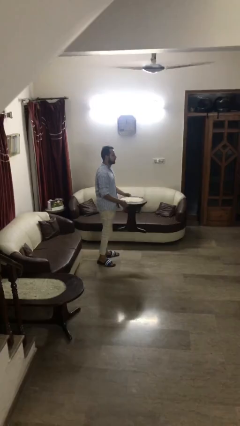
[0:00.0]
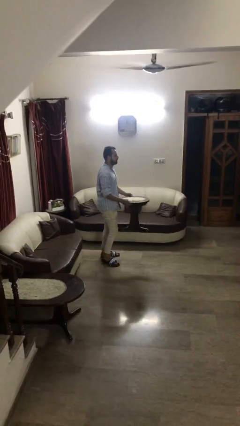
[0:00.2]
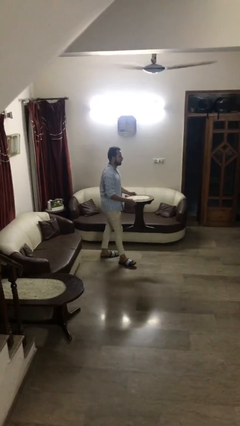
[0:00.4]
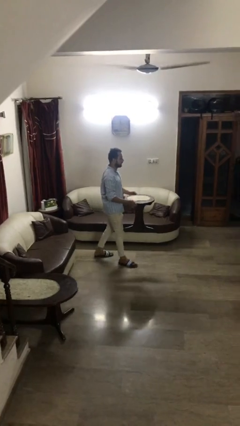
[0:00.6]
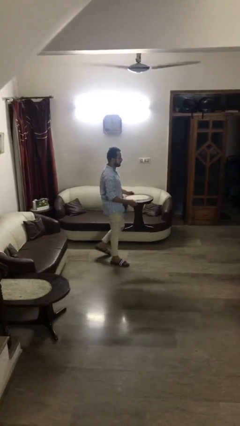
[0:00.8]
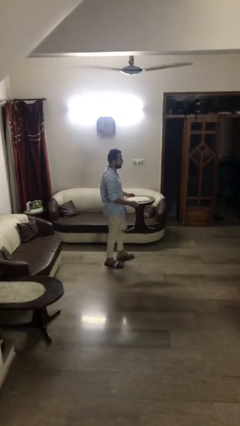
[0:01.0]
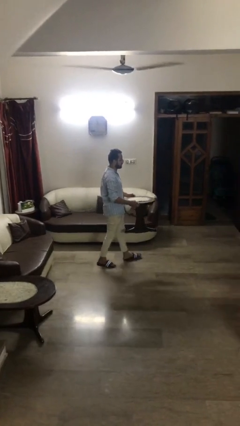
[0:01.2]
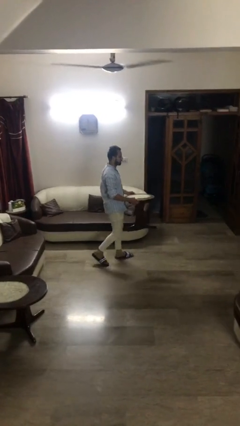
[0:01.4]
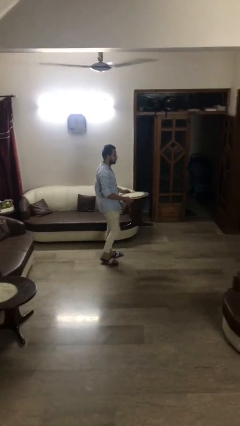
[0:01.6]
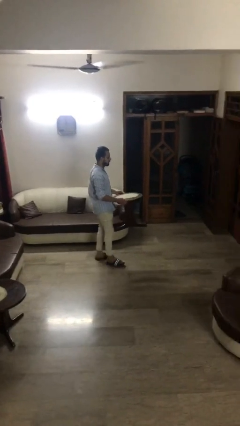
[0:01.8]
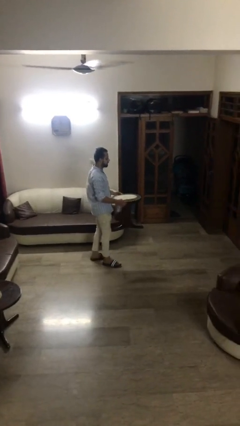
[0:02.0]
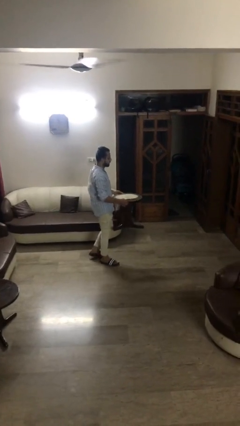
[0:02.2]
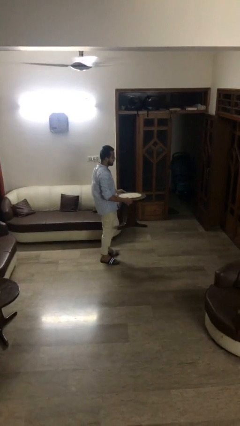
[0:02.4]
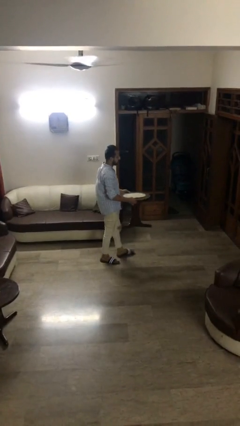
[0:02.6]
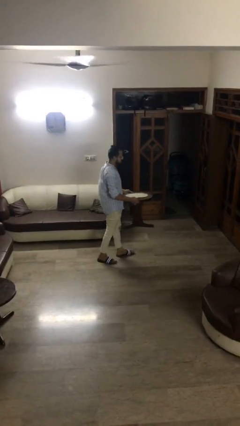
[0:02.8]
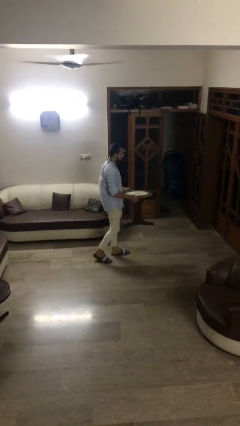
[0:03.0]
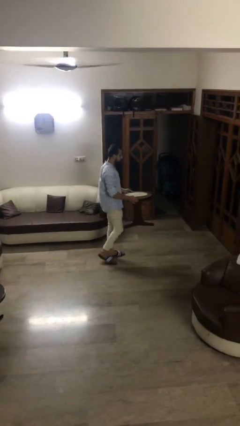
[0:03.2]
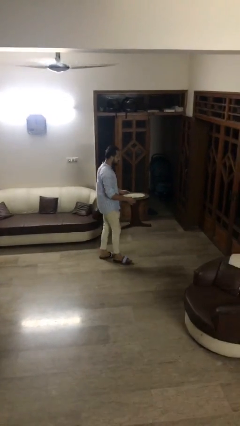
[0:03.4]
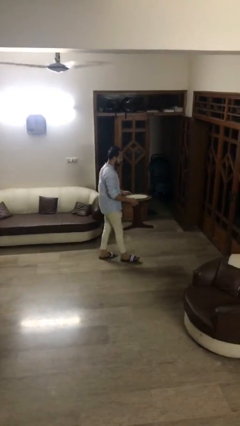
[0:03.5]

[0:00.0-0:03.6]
person carries heavy object

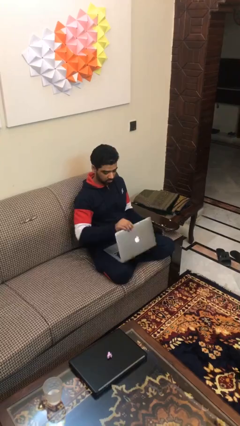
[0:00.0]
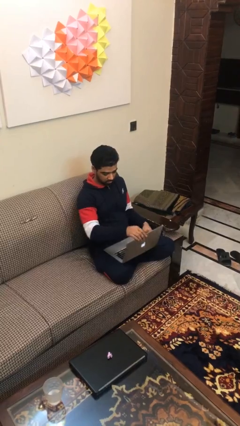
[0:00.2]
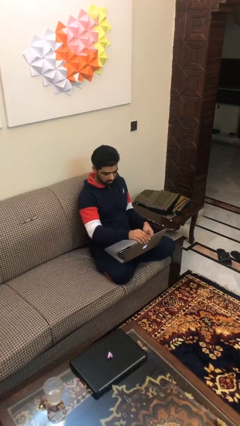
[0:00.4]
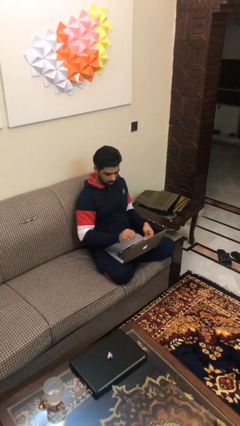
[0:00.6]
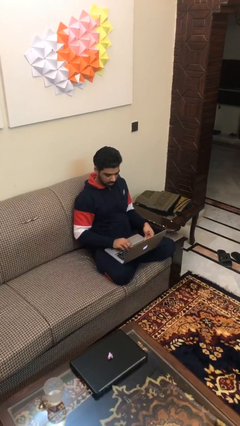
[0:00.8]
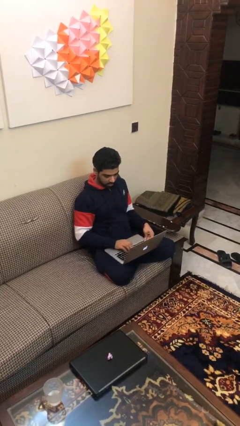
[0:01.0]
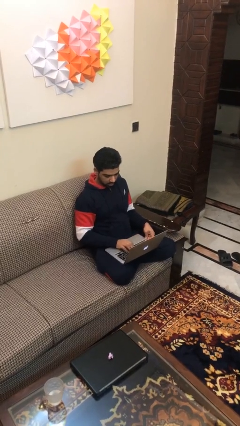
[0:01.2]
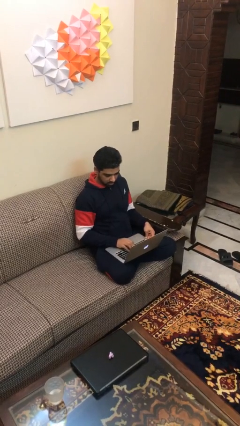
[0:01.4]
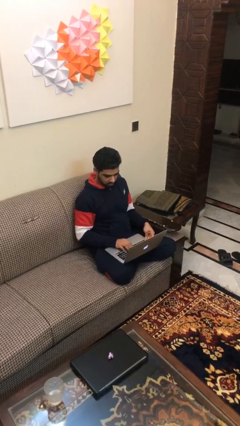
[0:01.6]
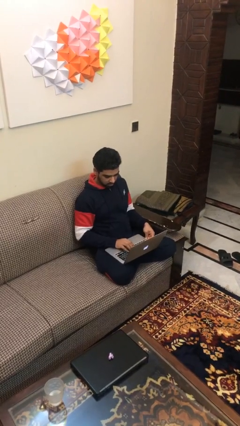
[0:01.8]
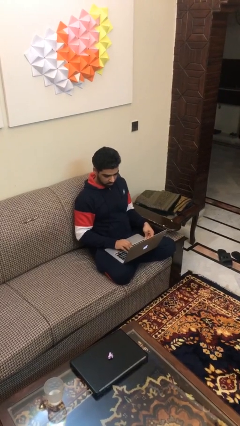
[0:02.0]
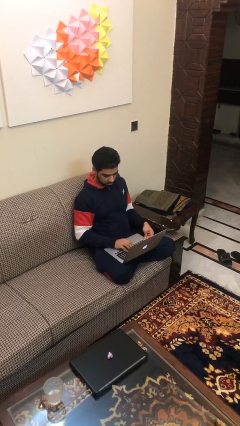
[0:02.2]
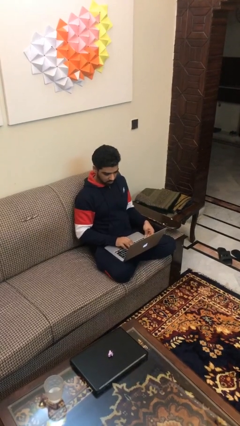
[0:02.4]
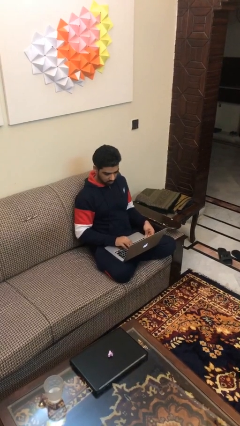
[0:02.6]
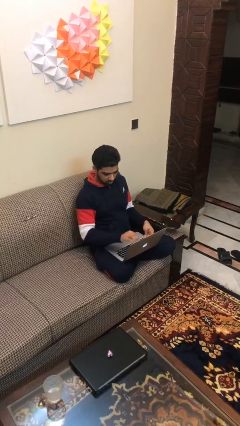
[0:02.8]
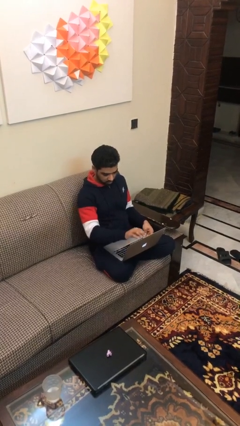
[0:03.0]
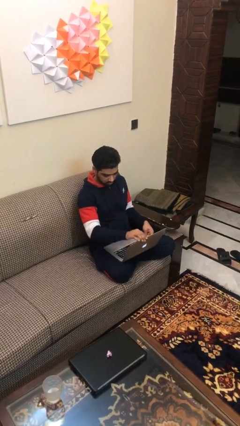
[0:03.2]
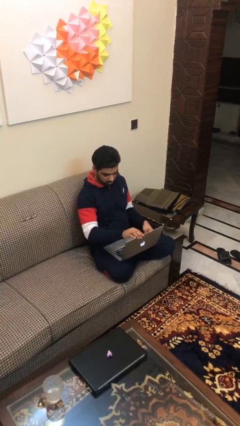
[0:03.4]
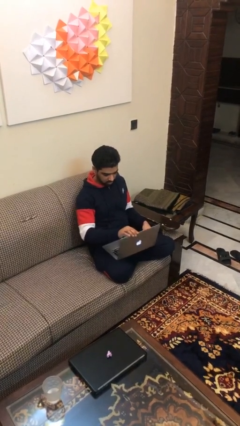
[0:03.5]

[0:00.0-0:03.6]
person interacts with laptop

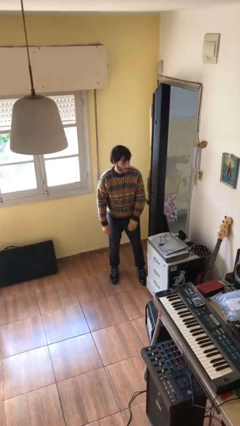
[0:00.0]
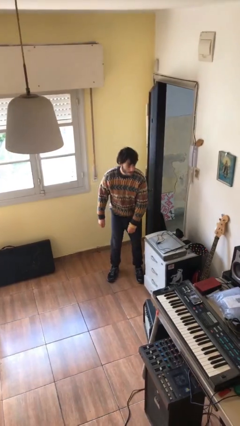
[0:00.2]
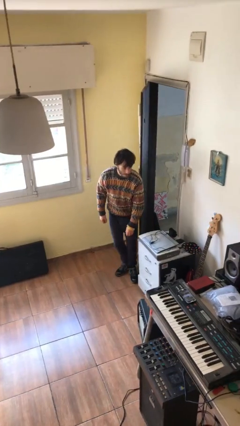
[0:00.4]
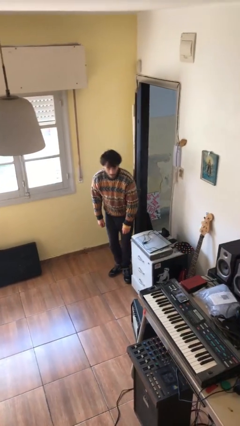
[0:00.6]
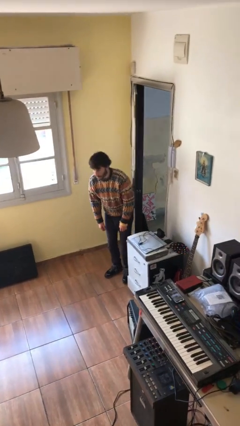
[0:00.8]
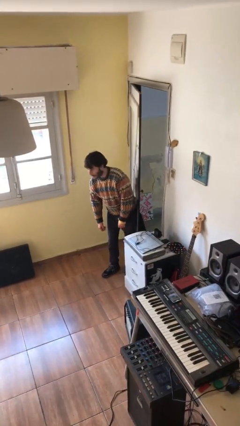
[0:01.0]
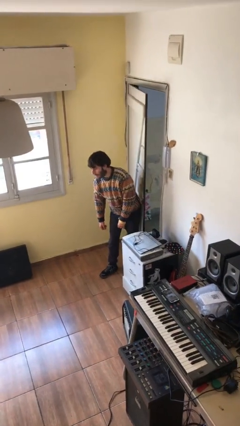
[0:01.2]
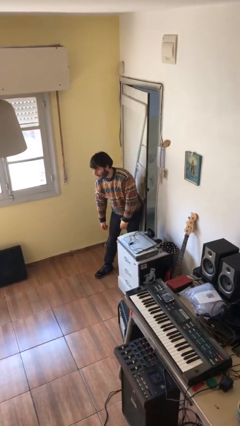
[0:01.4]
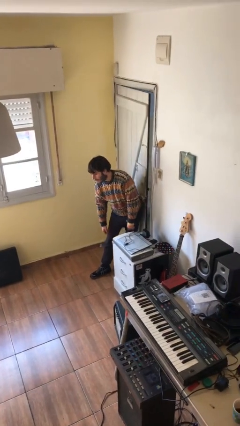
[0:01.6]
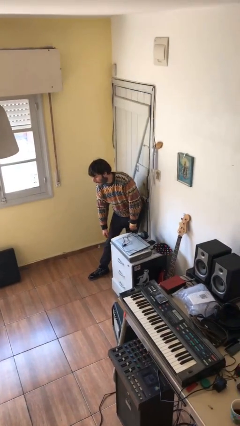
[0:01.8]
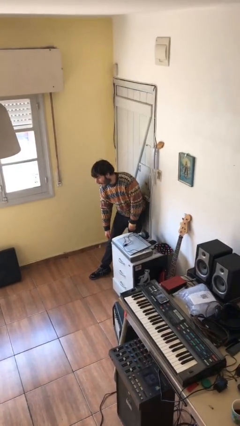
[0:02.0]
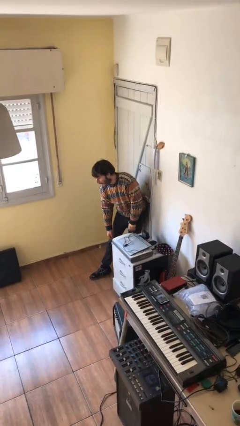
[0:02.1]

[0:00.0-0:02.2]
person closes door with hip

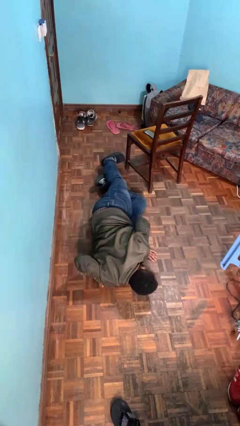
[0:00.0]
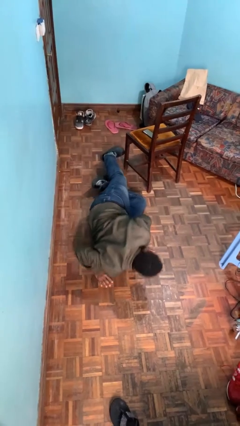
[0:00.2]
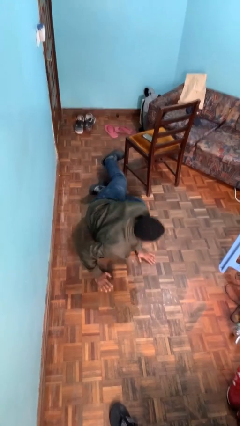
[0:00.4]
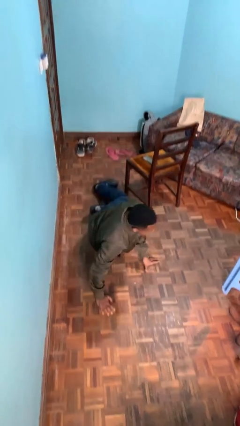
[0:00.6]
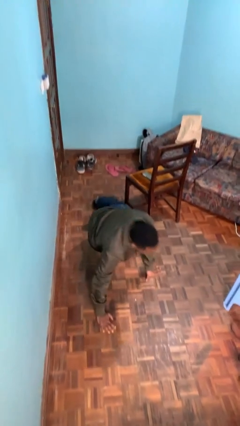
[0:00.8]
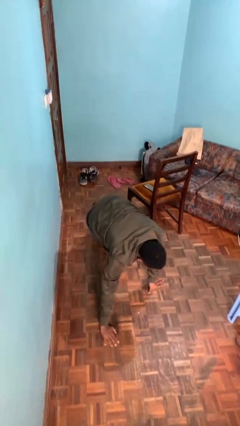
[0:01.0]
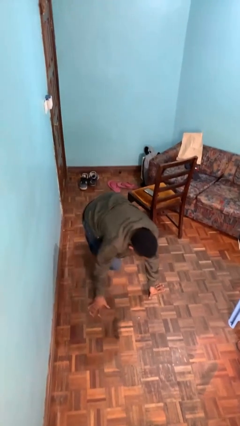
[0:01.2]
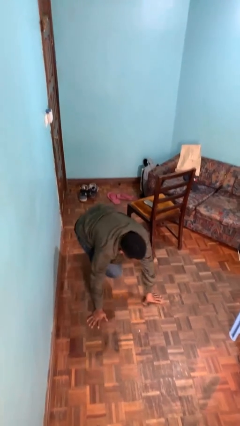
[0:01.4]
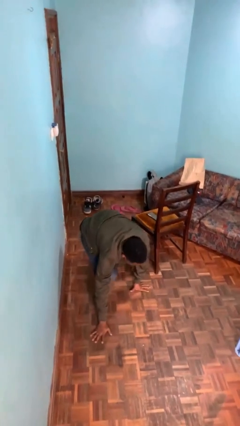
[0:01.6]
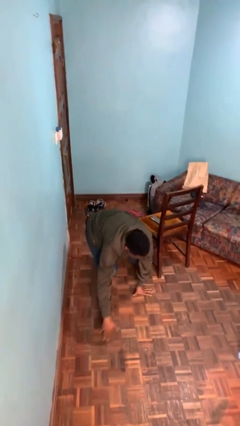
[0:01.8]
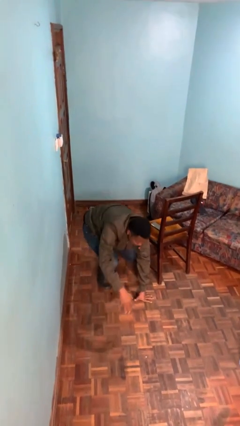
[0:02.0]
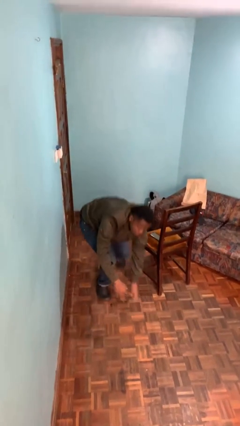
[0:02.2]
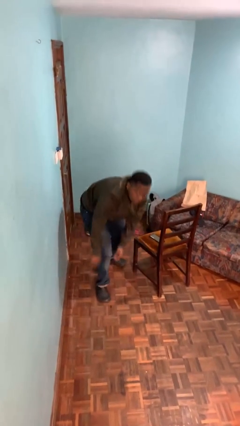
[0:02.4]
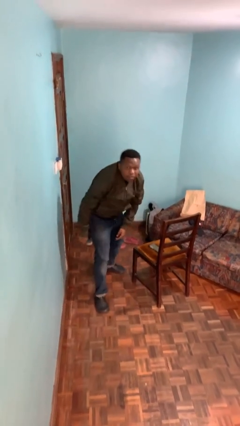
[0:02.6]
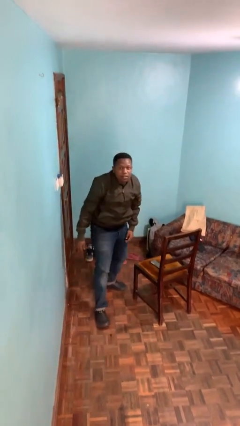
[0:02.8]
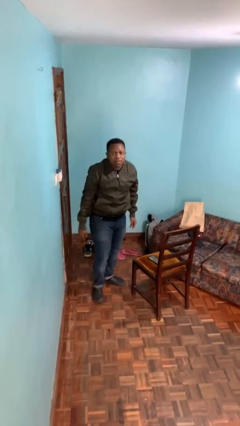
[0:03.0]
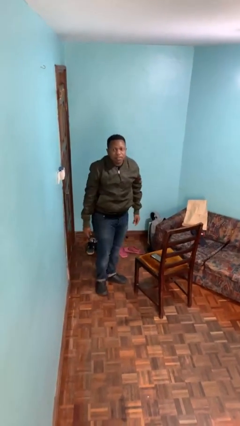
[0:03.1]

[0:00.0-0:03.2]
person stands up from floor

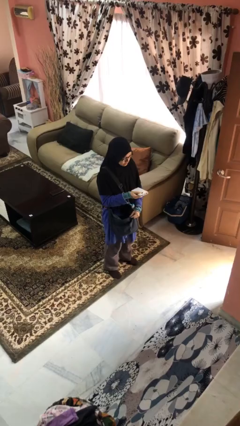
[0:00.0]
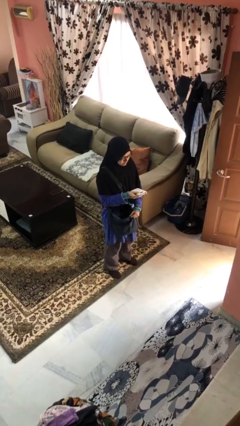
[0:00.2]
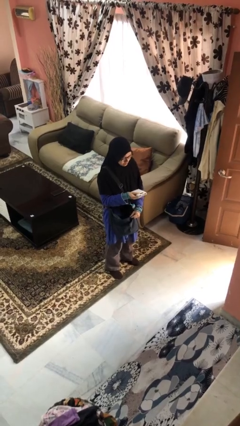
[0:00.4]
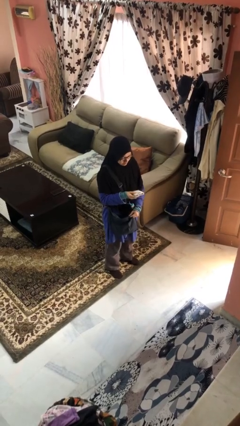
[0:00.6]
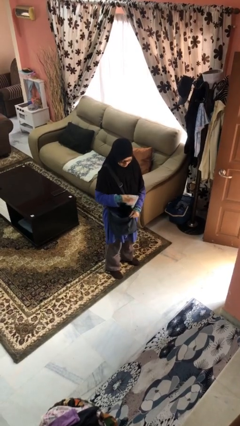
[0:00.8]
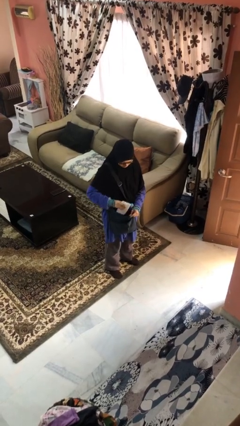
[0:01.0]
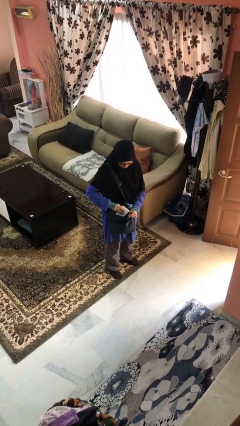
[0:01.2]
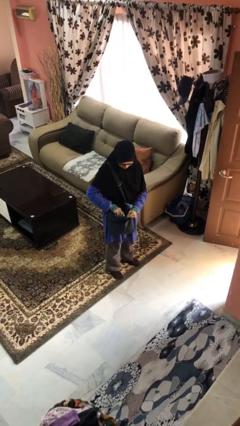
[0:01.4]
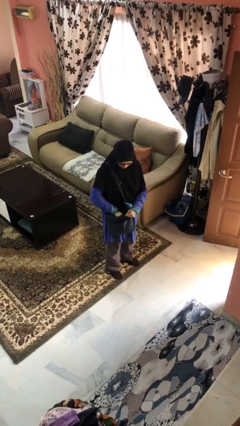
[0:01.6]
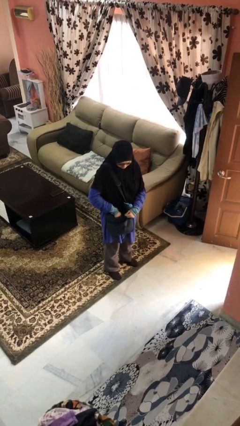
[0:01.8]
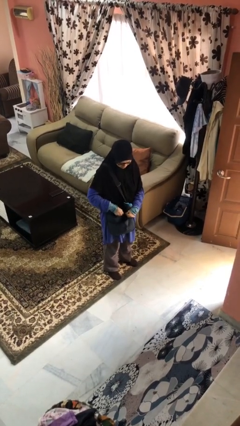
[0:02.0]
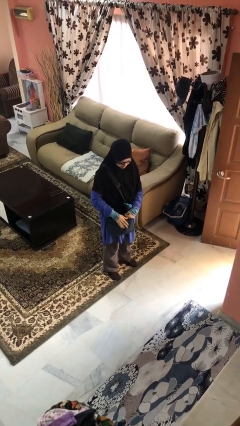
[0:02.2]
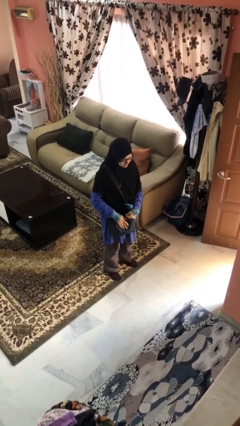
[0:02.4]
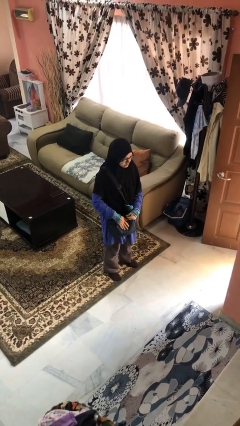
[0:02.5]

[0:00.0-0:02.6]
person puts object into purse

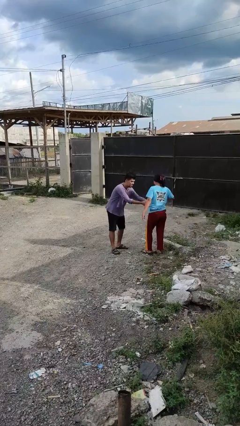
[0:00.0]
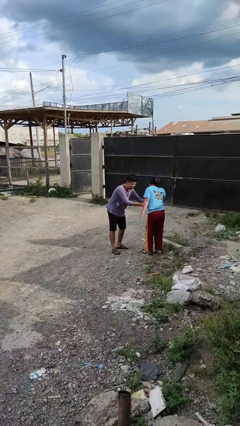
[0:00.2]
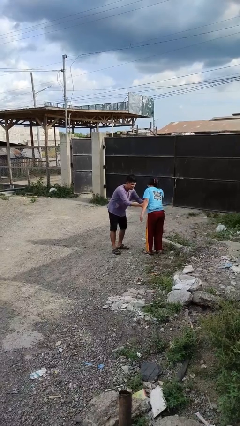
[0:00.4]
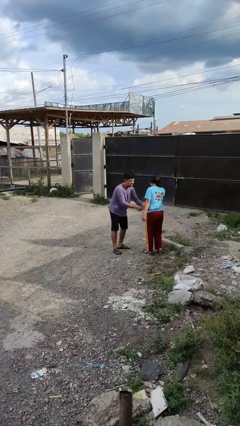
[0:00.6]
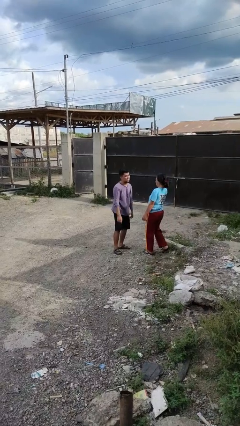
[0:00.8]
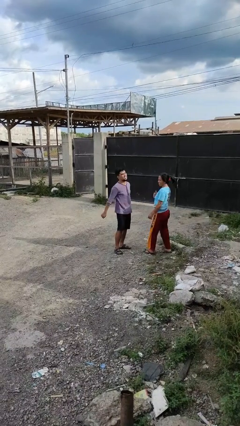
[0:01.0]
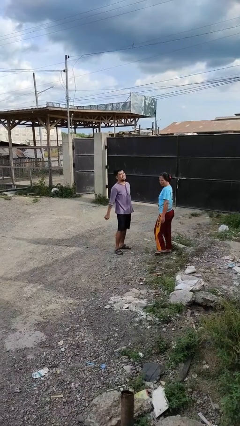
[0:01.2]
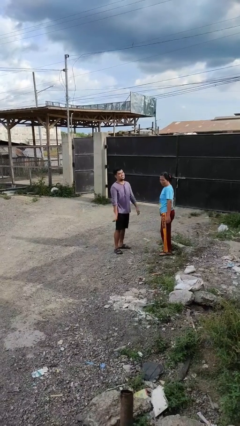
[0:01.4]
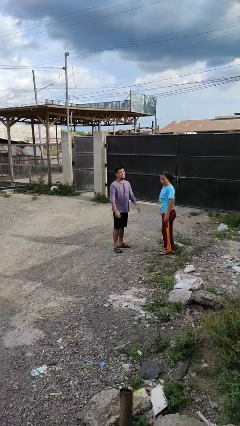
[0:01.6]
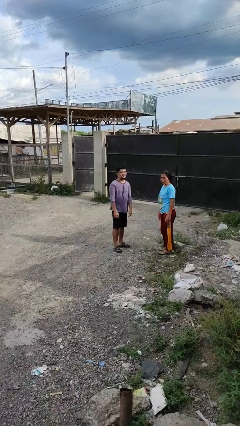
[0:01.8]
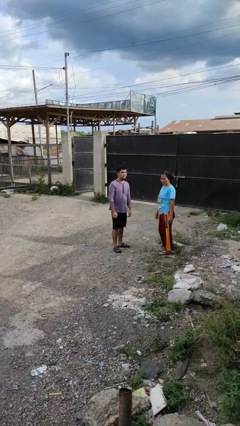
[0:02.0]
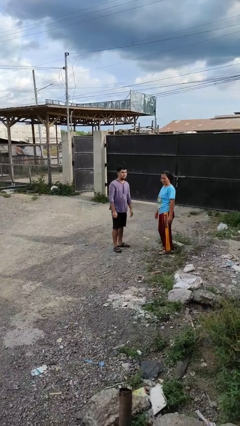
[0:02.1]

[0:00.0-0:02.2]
person tickles person
